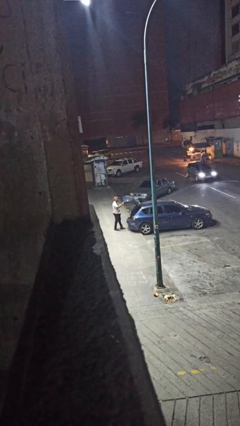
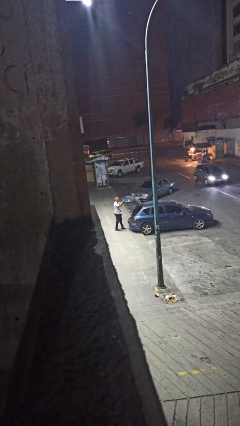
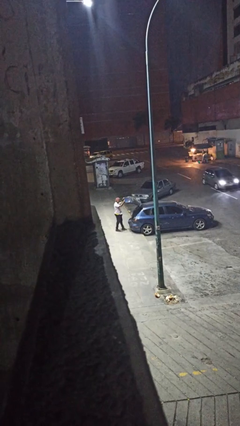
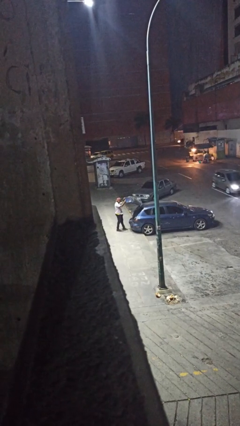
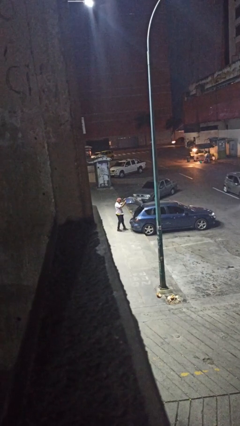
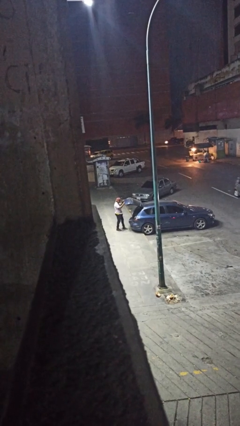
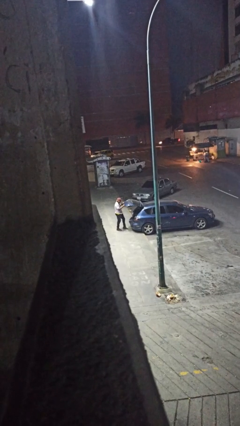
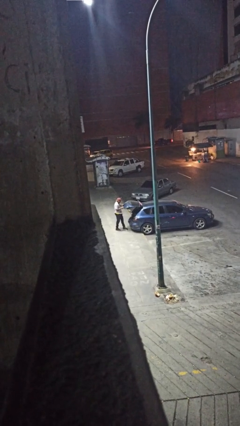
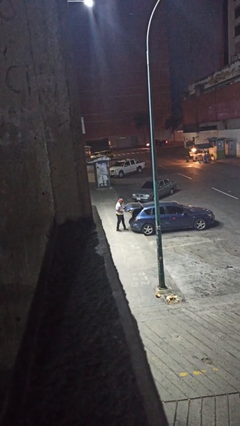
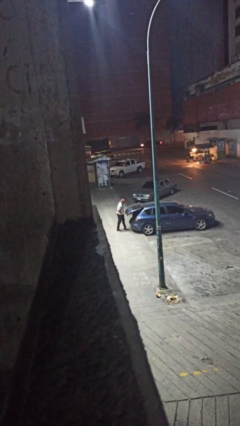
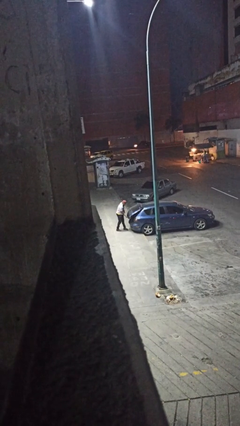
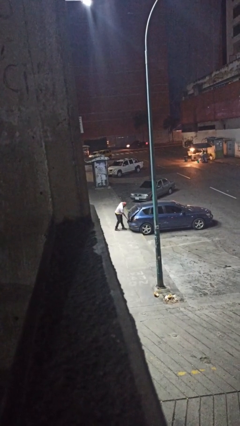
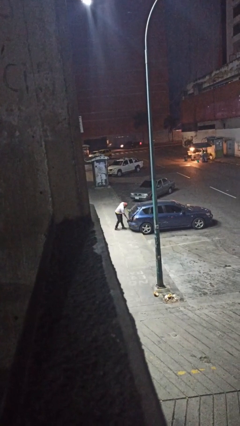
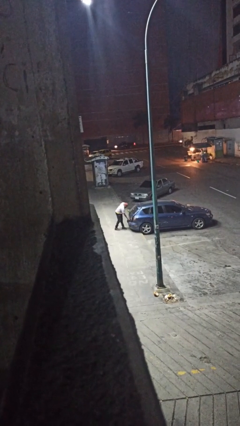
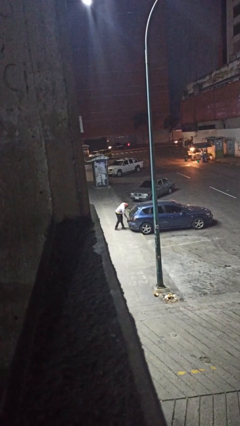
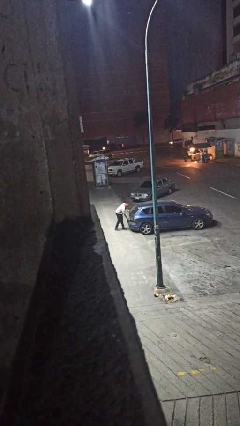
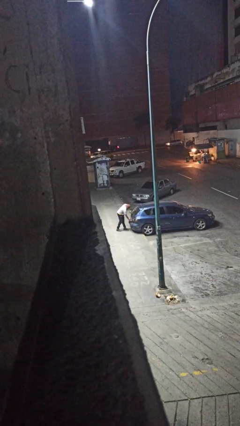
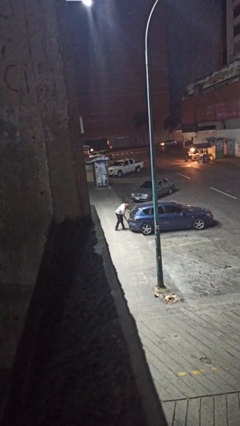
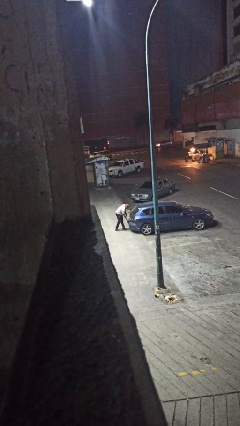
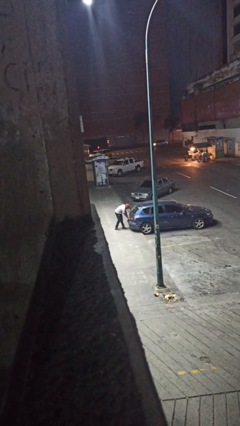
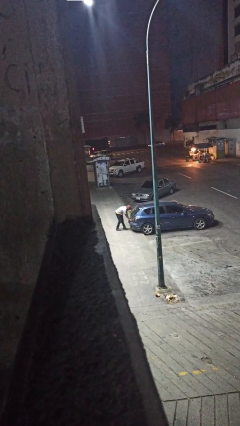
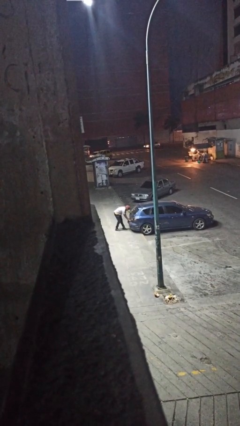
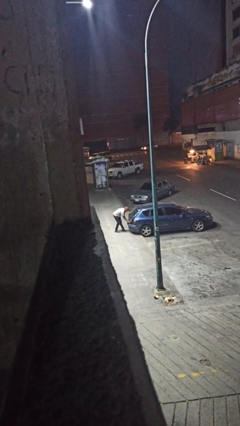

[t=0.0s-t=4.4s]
person closes car trunk

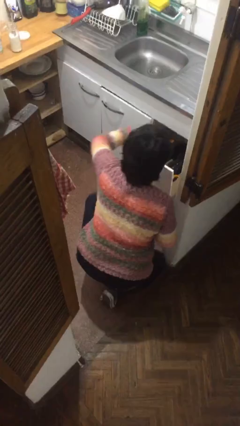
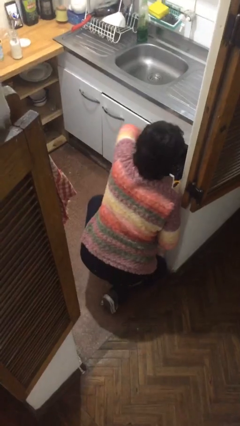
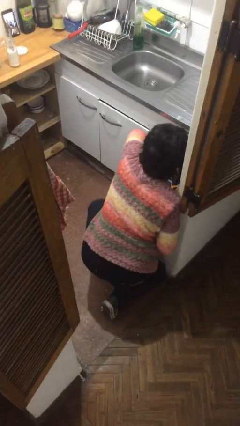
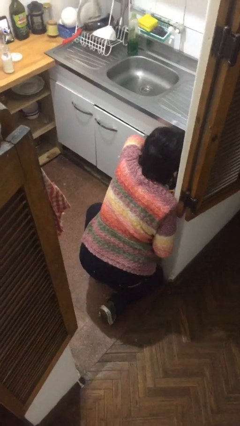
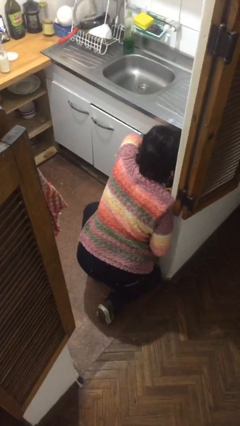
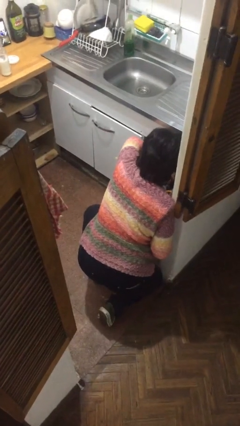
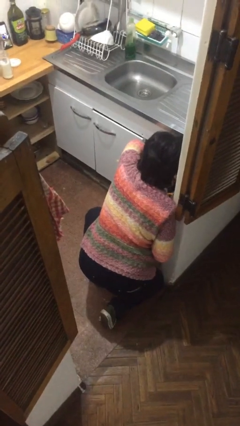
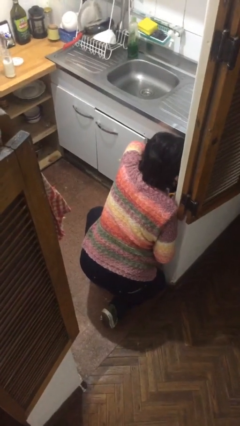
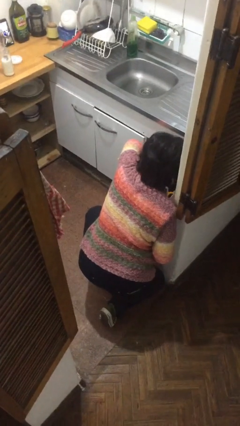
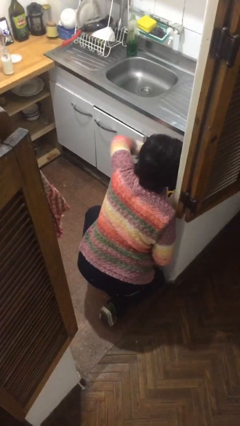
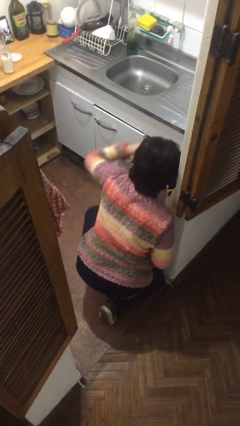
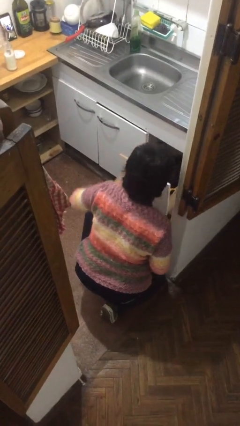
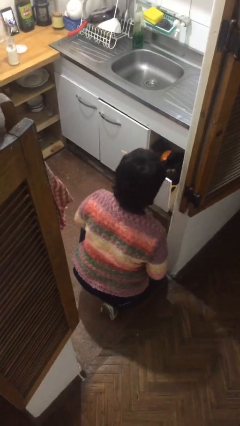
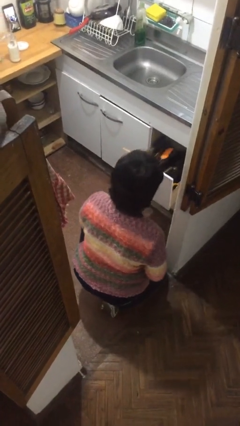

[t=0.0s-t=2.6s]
person searches in kitchen drawer

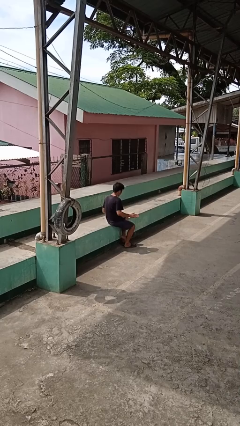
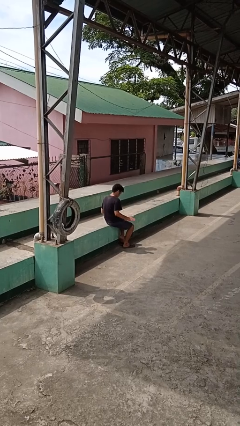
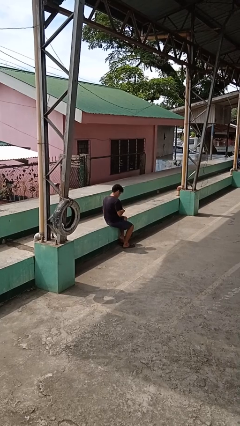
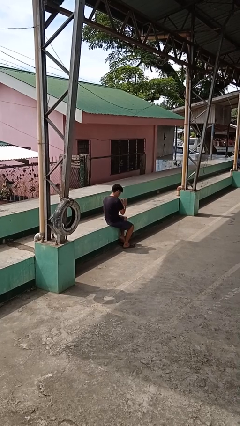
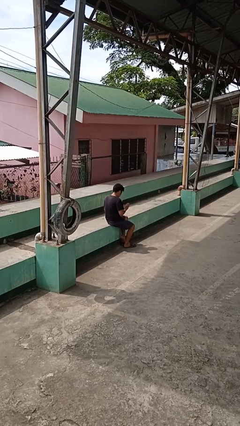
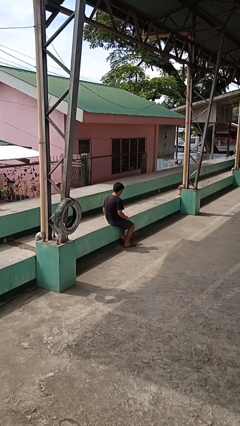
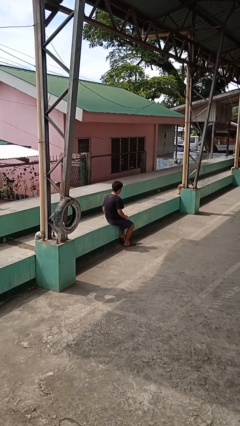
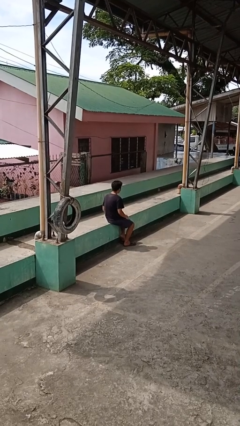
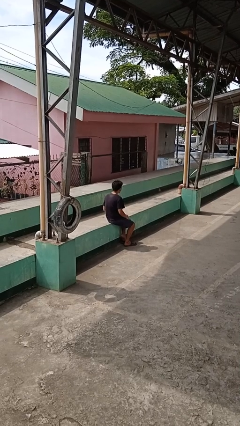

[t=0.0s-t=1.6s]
person slaps hands on thighs

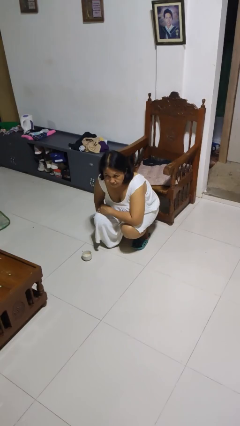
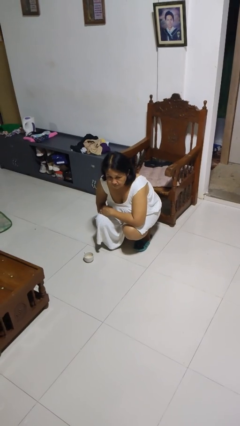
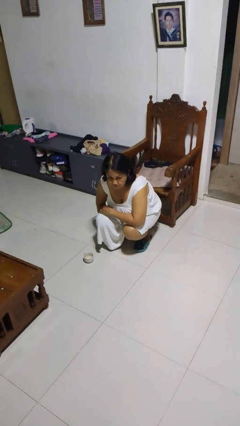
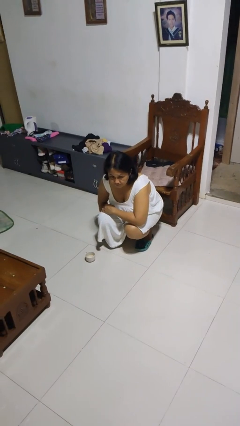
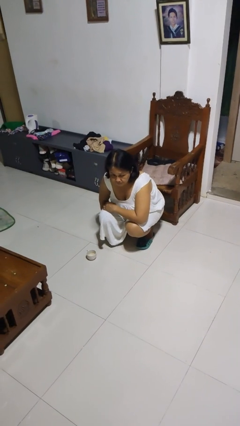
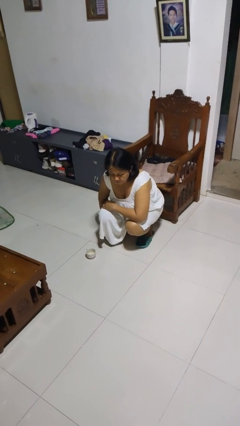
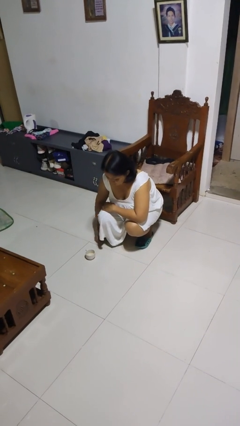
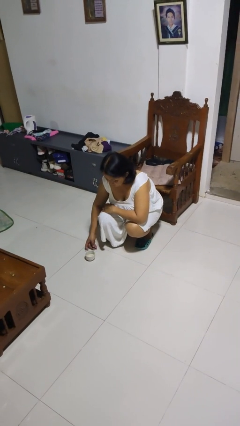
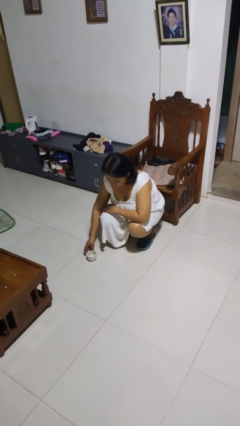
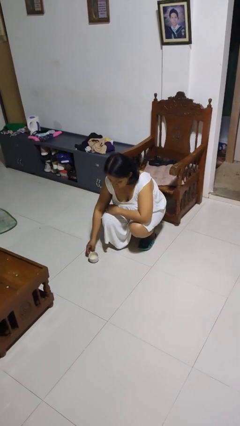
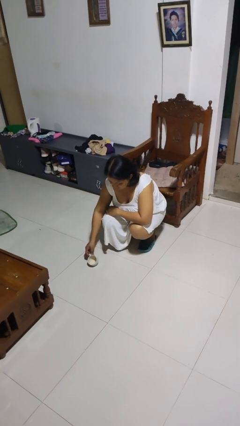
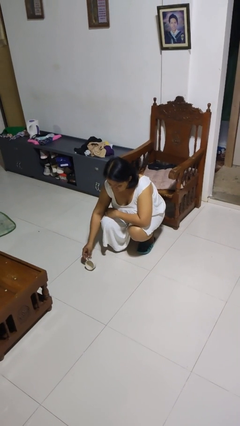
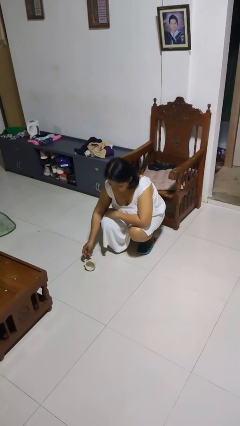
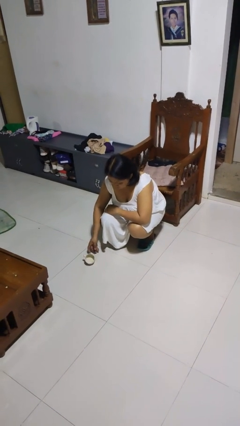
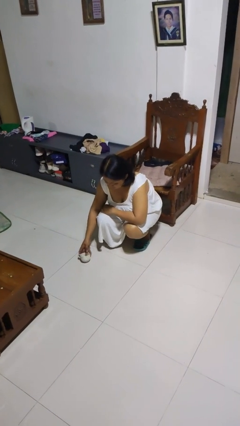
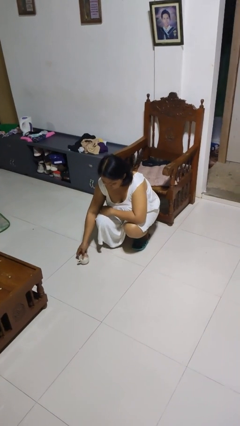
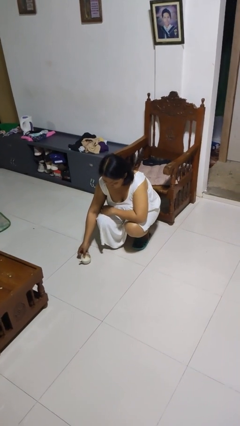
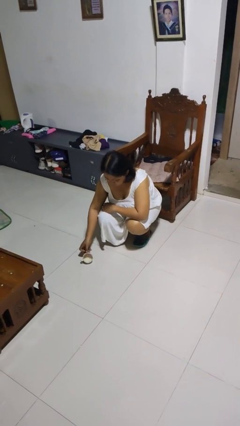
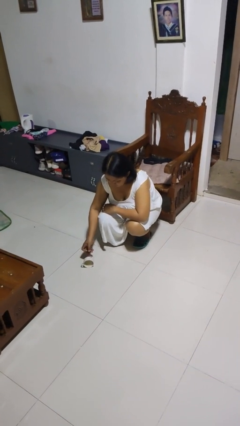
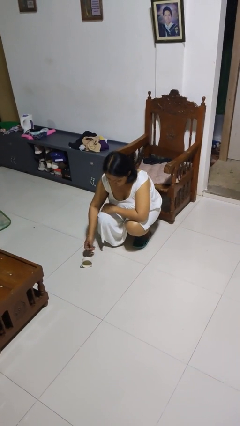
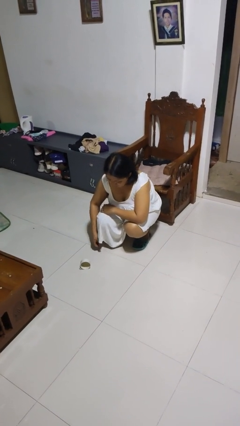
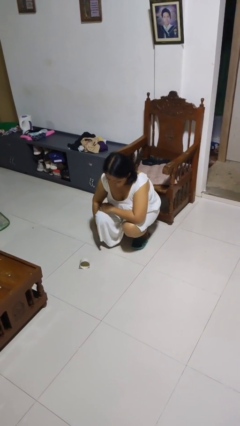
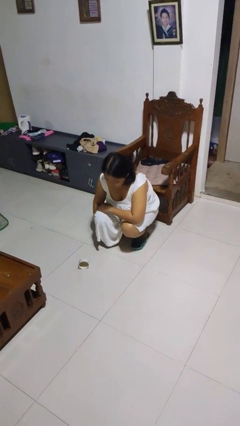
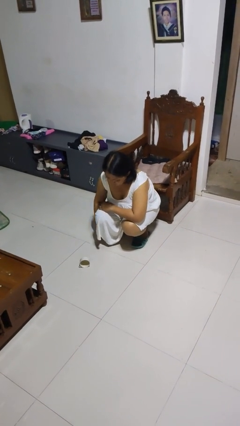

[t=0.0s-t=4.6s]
person spills on floor

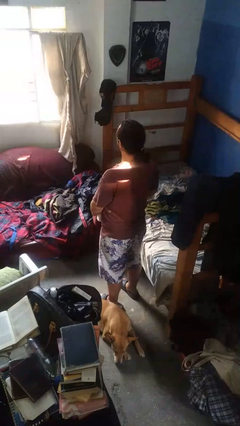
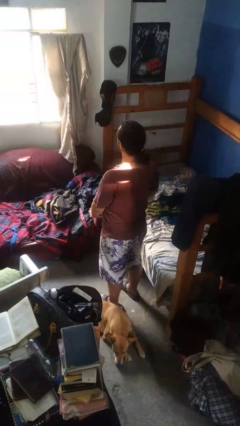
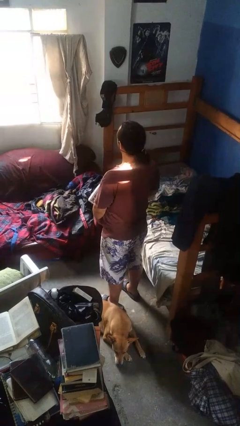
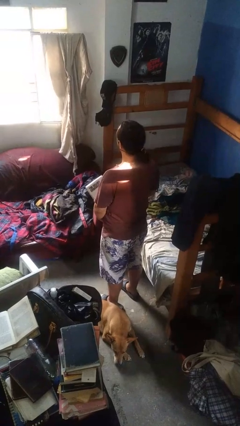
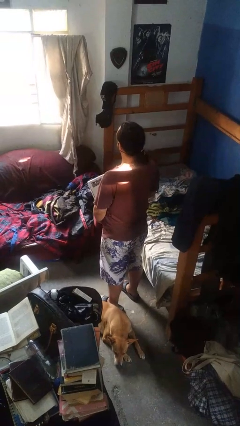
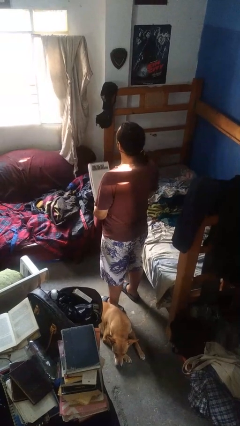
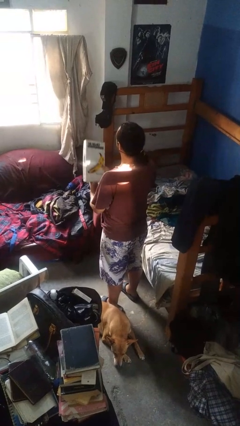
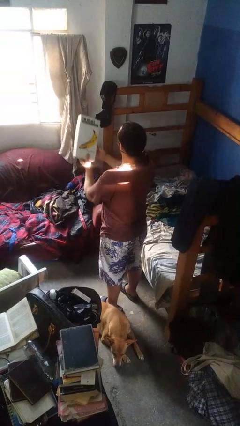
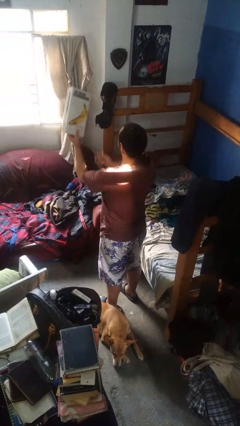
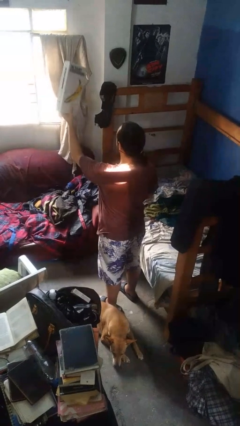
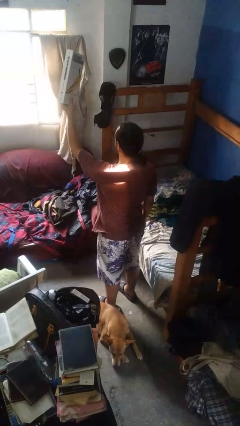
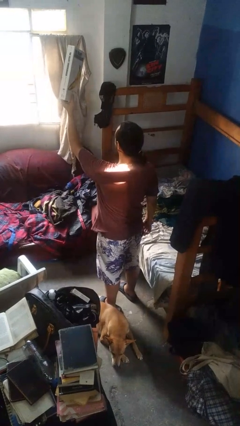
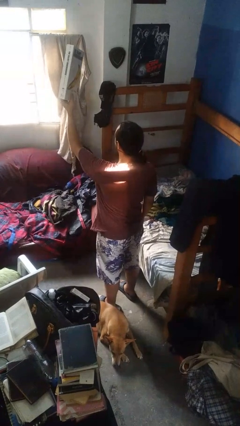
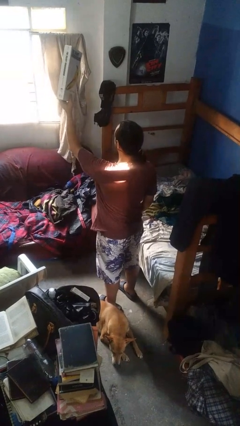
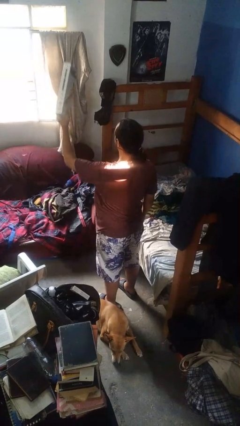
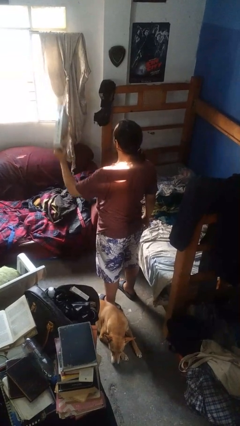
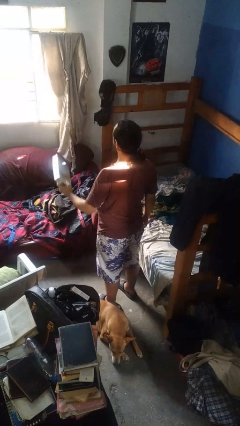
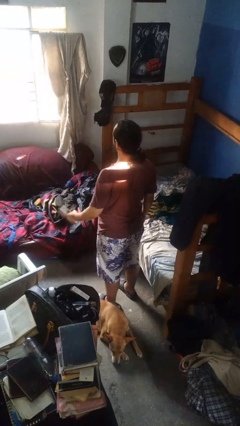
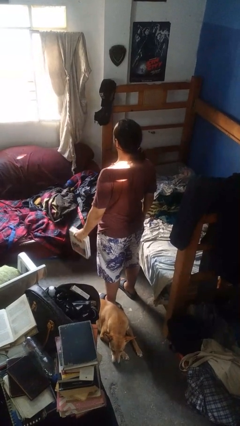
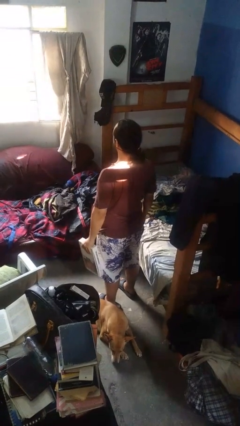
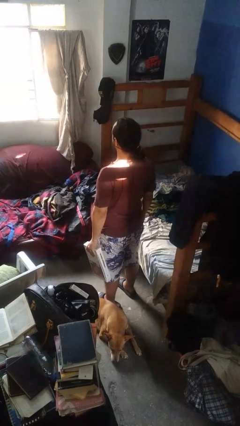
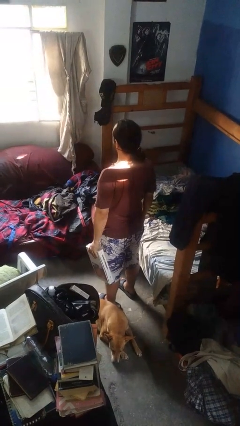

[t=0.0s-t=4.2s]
person holds object above head

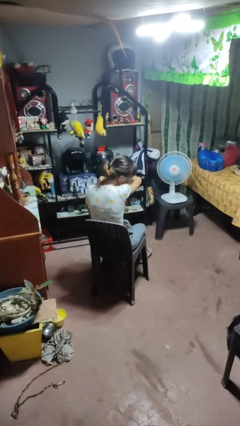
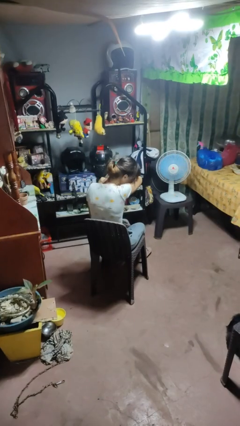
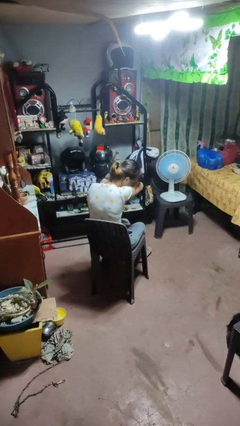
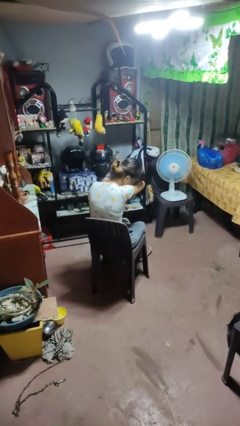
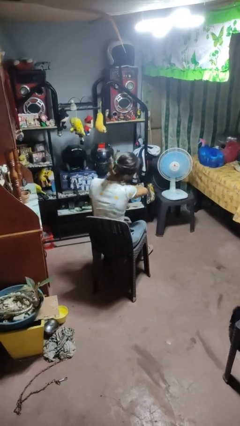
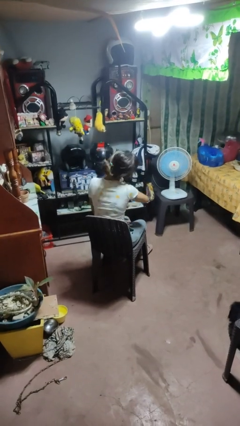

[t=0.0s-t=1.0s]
person sneezes into arm
